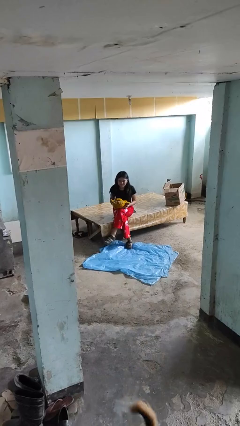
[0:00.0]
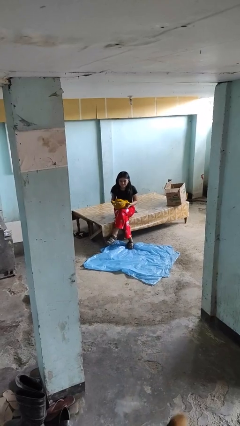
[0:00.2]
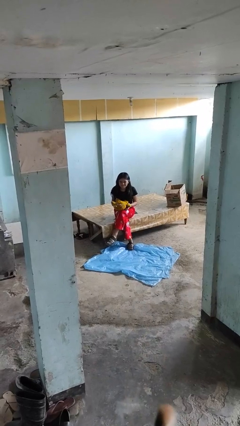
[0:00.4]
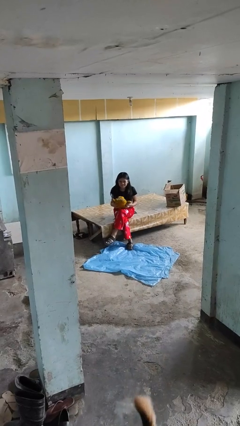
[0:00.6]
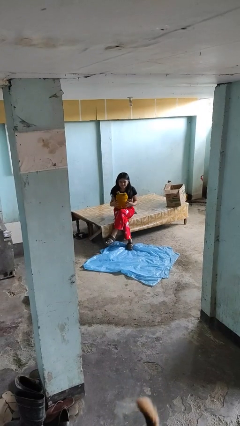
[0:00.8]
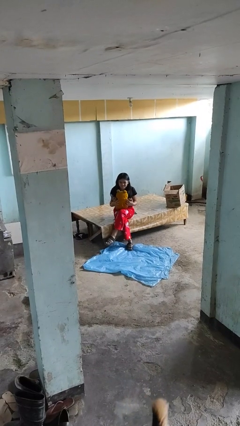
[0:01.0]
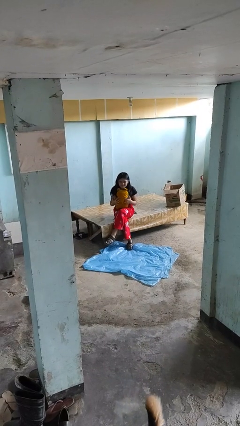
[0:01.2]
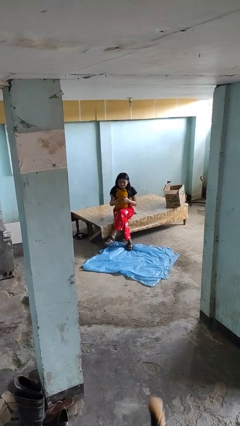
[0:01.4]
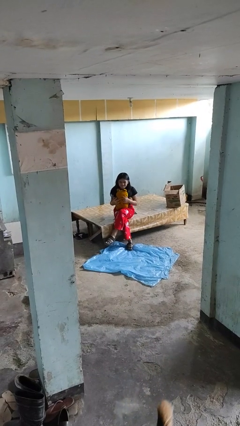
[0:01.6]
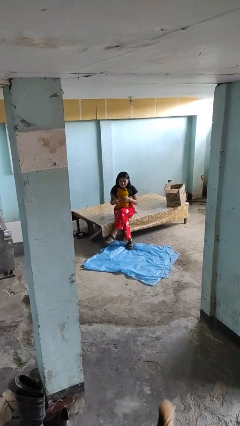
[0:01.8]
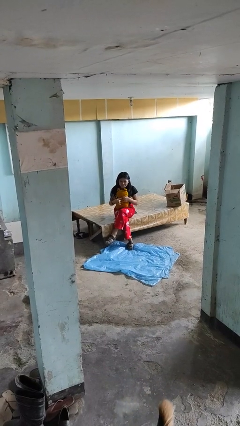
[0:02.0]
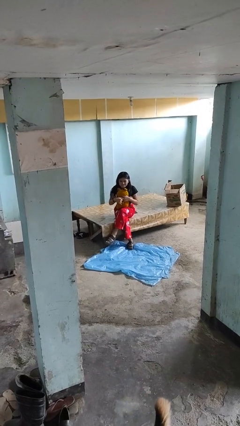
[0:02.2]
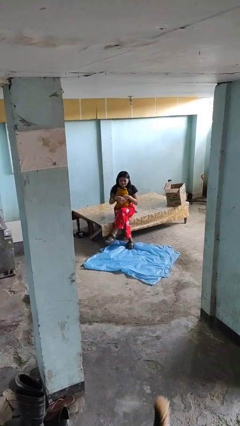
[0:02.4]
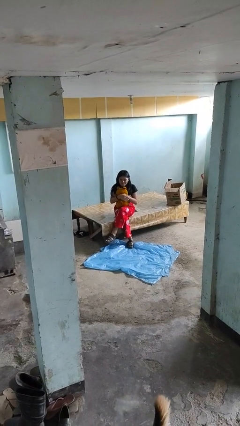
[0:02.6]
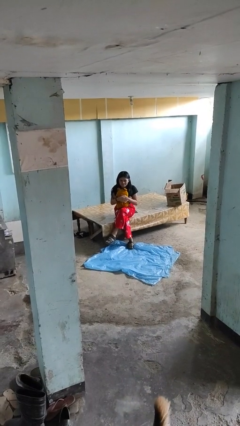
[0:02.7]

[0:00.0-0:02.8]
person hugs stuffed animal

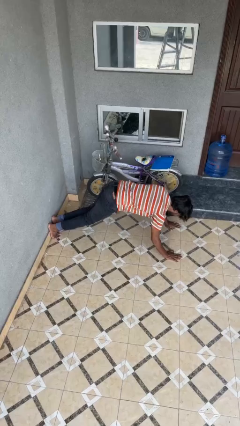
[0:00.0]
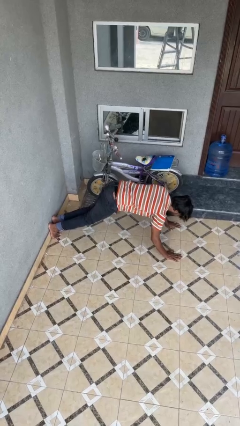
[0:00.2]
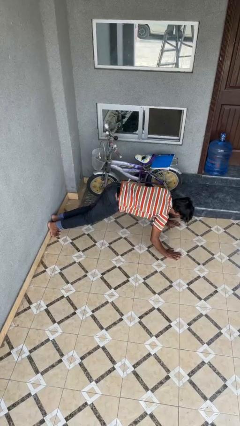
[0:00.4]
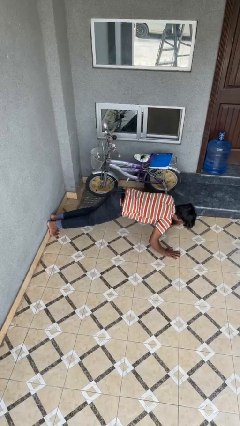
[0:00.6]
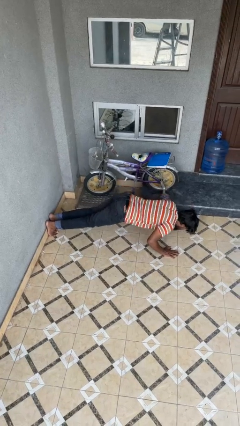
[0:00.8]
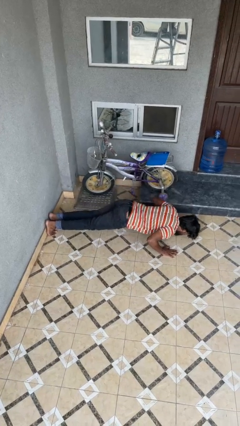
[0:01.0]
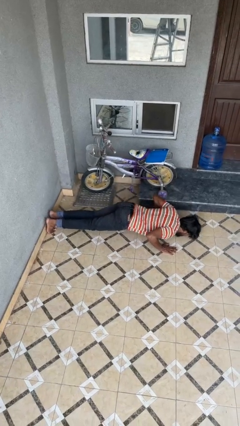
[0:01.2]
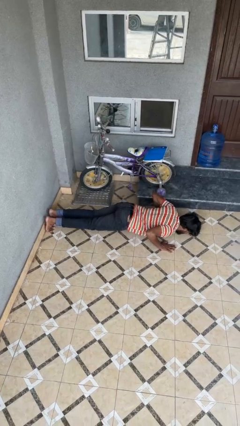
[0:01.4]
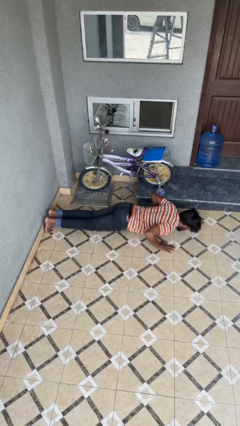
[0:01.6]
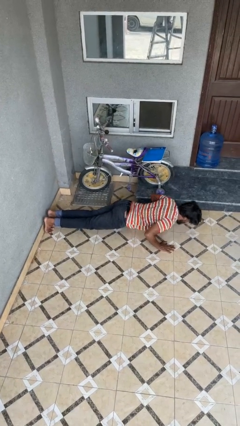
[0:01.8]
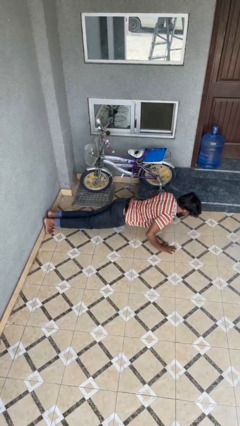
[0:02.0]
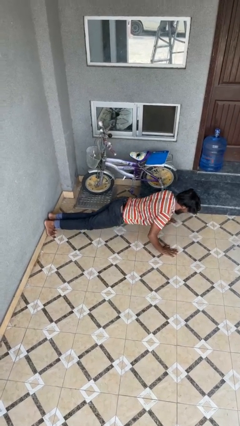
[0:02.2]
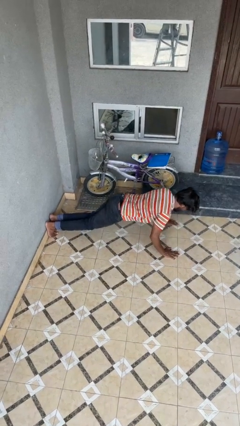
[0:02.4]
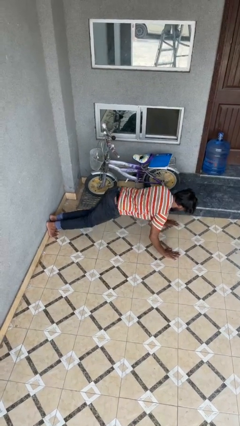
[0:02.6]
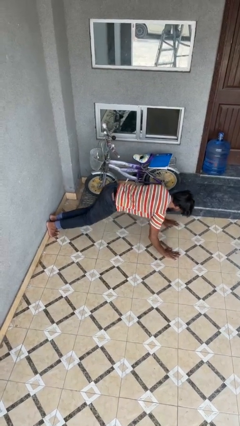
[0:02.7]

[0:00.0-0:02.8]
person exercises with pushup

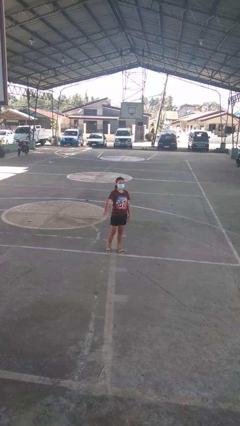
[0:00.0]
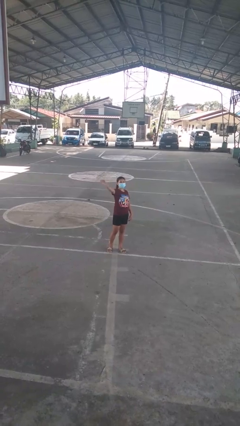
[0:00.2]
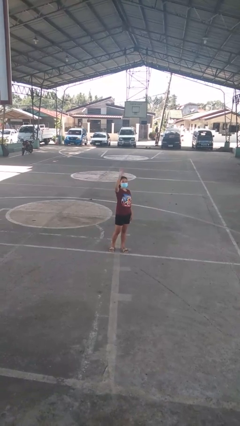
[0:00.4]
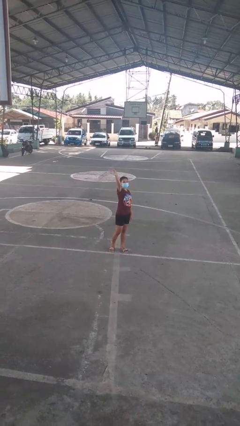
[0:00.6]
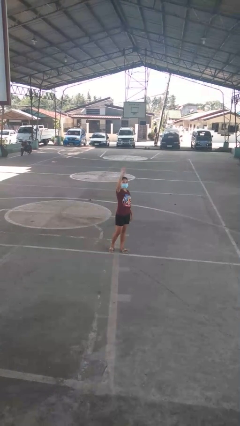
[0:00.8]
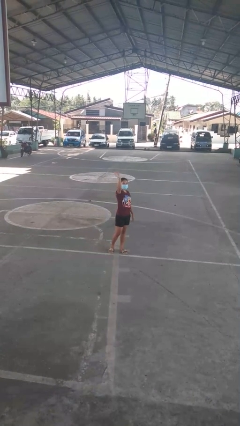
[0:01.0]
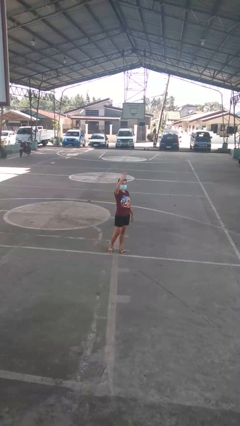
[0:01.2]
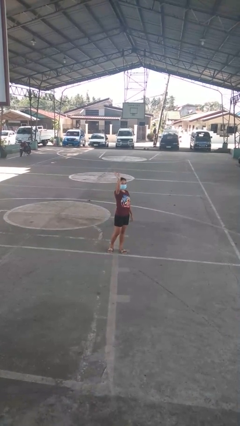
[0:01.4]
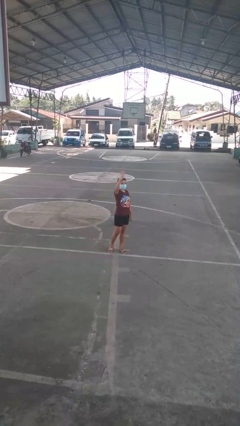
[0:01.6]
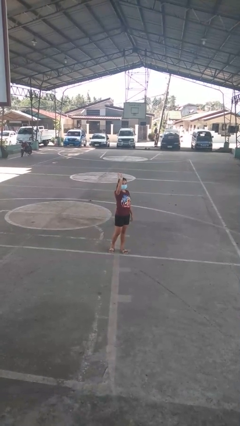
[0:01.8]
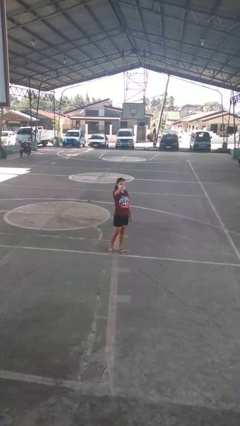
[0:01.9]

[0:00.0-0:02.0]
person waves at person

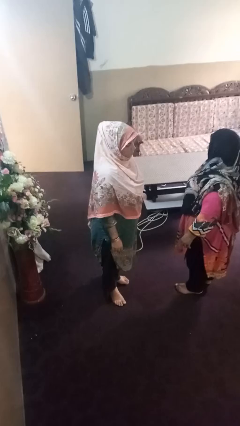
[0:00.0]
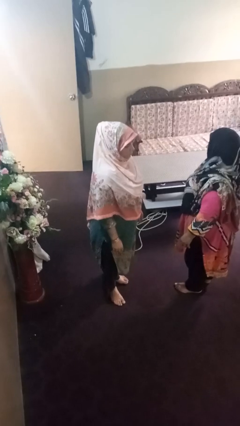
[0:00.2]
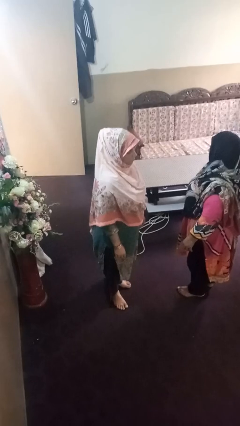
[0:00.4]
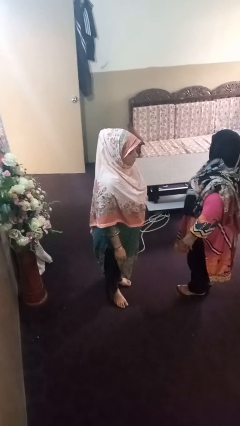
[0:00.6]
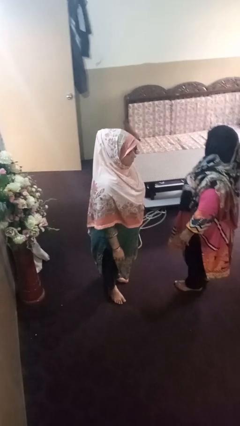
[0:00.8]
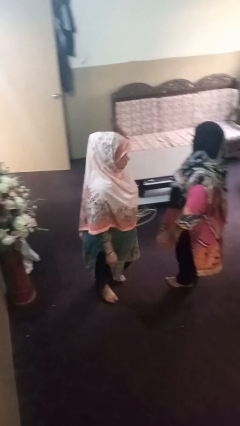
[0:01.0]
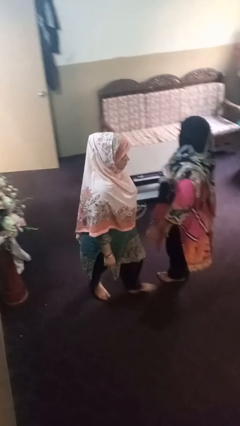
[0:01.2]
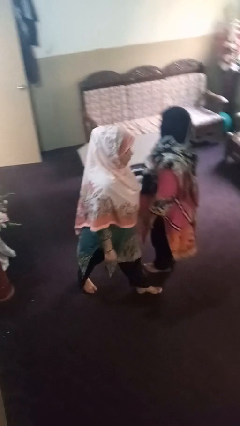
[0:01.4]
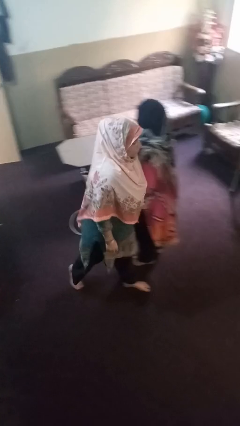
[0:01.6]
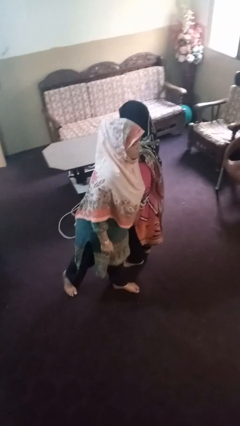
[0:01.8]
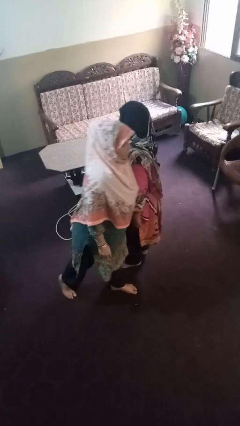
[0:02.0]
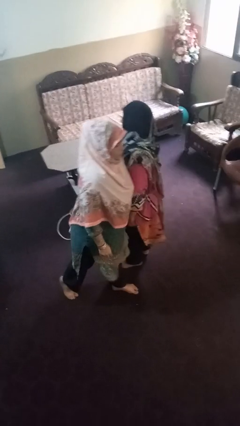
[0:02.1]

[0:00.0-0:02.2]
person shoves person

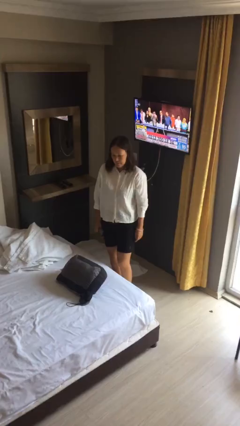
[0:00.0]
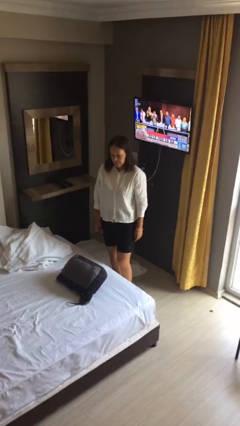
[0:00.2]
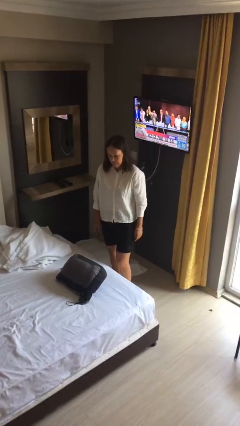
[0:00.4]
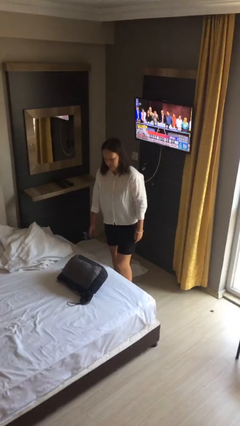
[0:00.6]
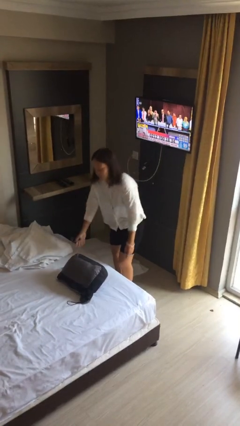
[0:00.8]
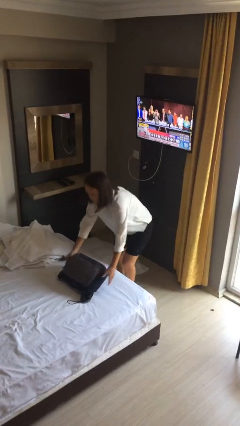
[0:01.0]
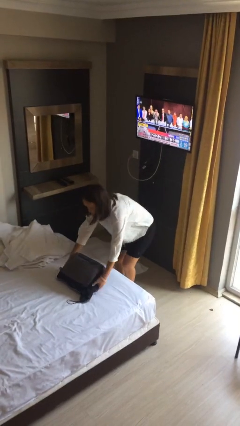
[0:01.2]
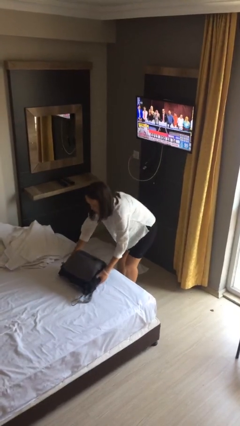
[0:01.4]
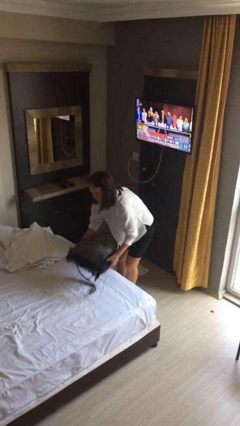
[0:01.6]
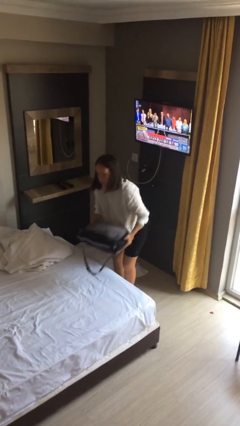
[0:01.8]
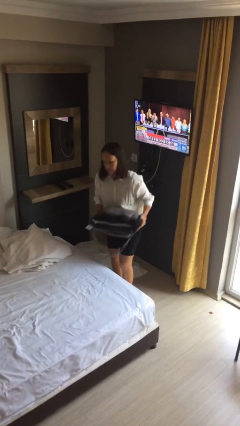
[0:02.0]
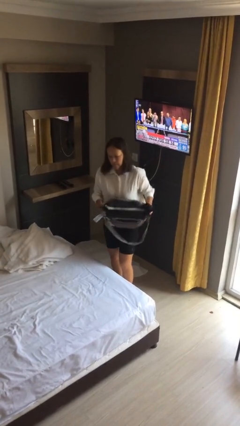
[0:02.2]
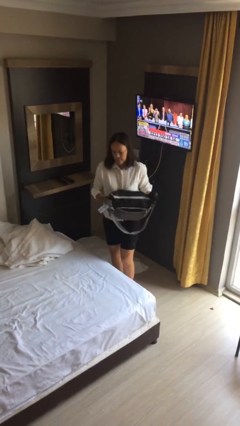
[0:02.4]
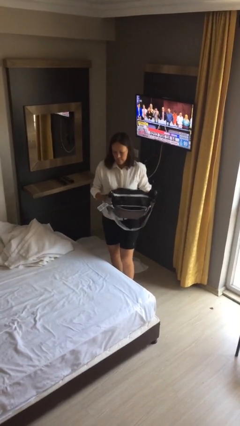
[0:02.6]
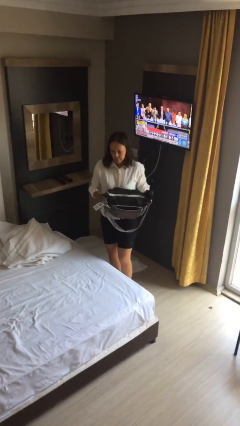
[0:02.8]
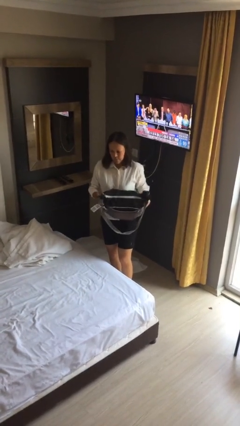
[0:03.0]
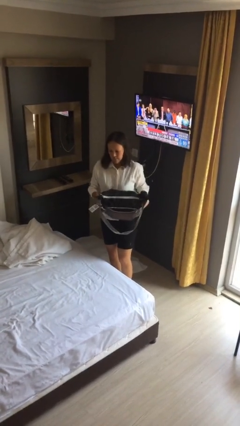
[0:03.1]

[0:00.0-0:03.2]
person picks up object from bed

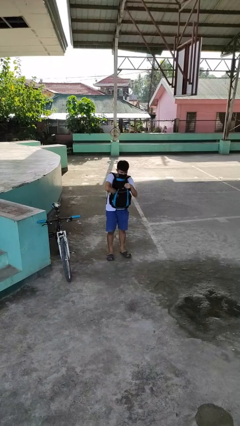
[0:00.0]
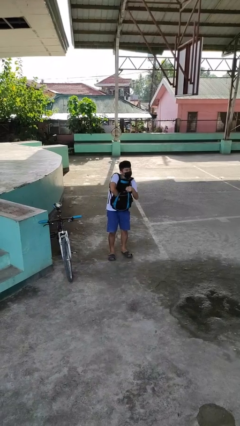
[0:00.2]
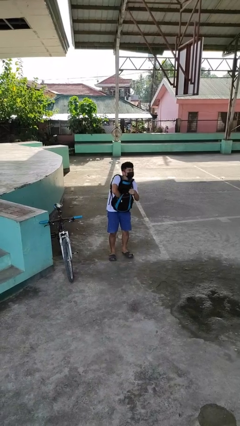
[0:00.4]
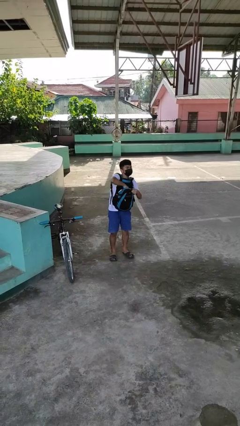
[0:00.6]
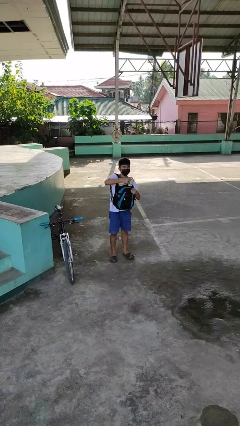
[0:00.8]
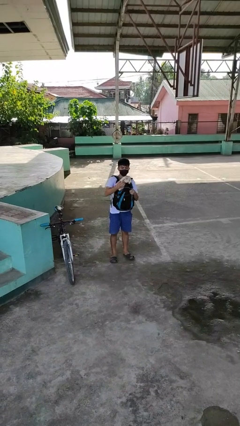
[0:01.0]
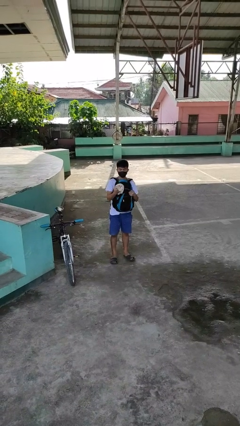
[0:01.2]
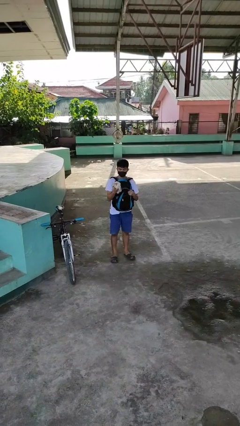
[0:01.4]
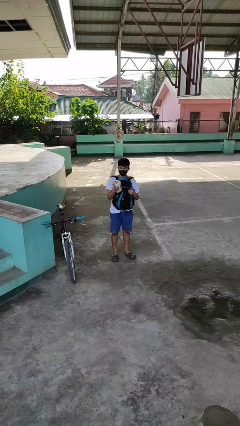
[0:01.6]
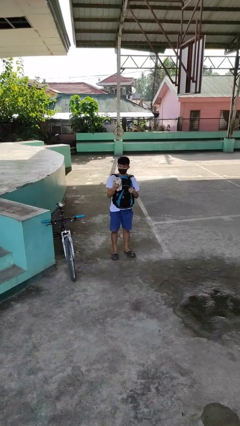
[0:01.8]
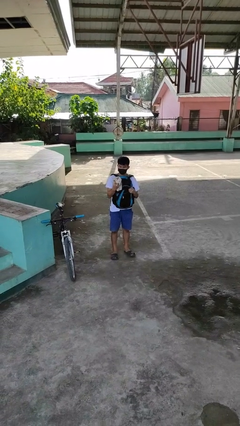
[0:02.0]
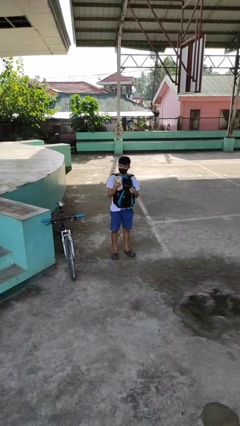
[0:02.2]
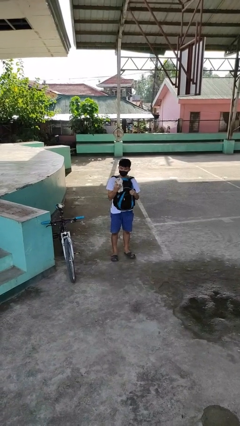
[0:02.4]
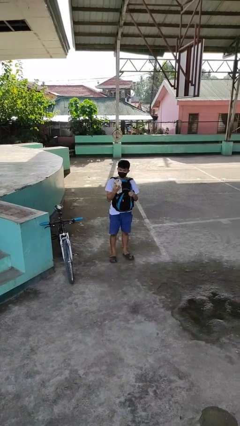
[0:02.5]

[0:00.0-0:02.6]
person takes object from backpack

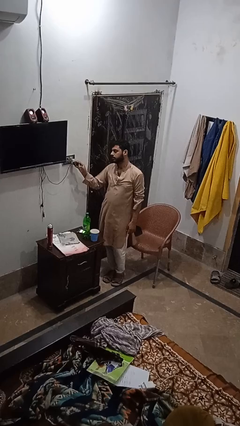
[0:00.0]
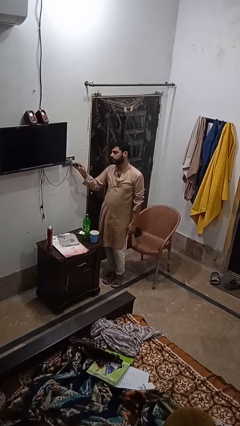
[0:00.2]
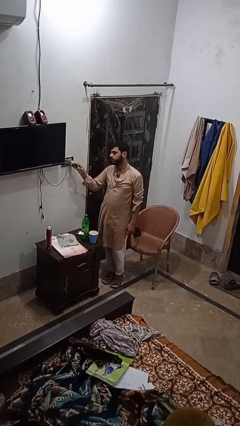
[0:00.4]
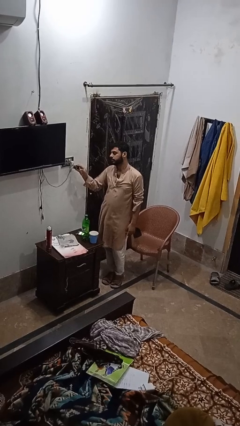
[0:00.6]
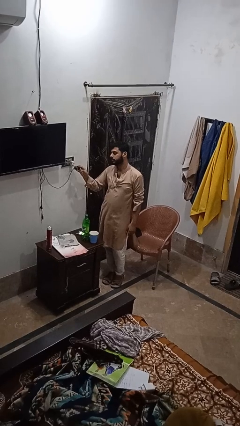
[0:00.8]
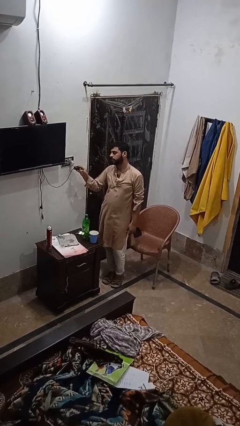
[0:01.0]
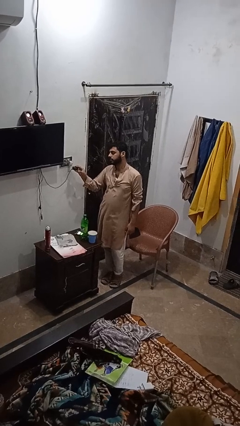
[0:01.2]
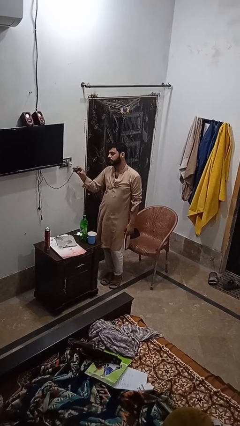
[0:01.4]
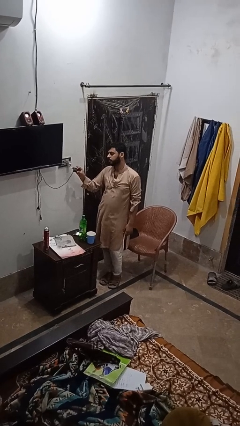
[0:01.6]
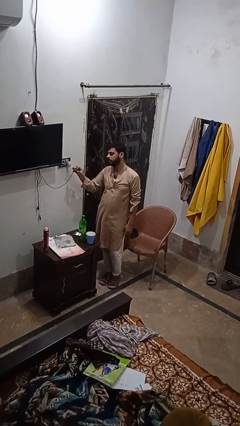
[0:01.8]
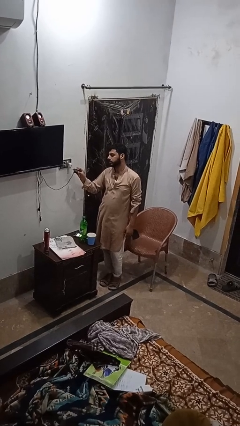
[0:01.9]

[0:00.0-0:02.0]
person unplugs from electrical socket
